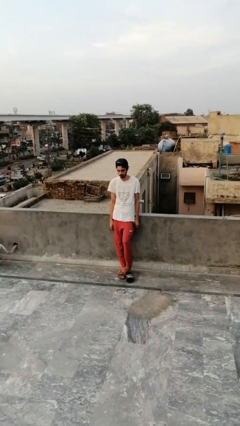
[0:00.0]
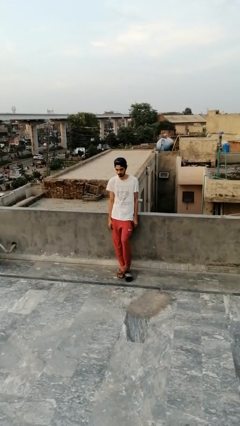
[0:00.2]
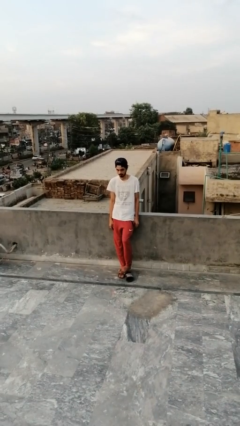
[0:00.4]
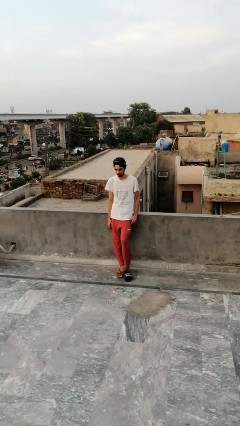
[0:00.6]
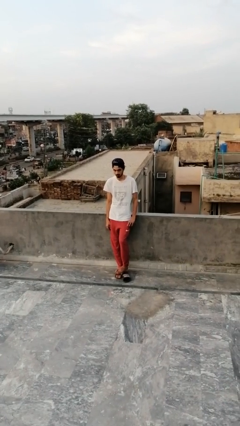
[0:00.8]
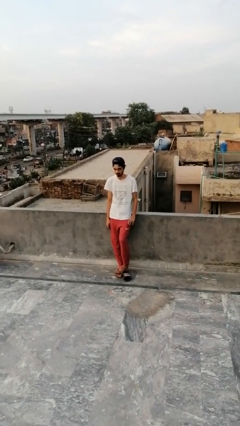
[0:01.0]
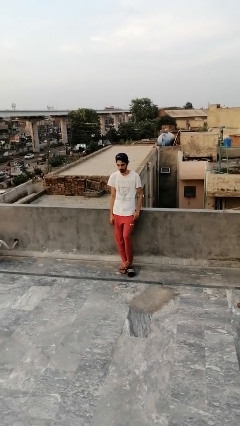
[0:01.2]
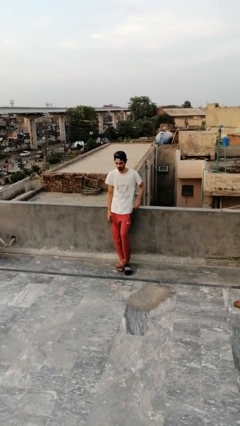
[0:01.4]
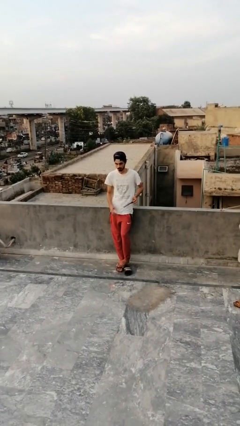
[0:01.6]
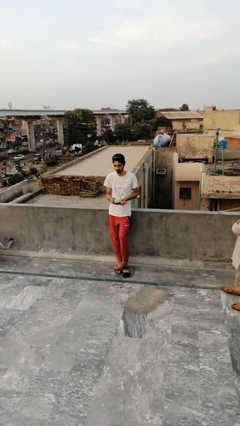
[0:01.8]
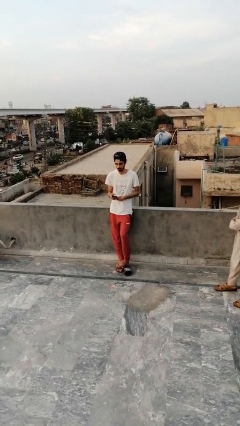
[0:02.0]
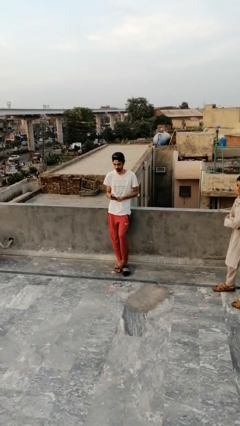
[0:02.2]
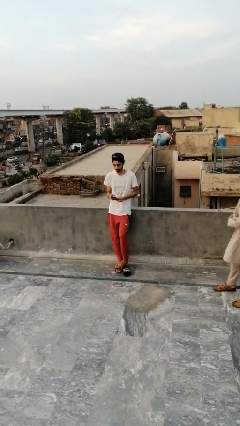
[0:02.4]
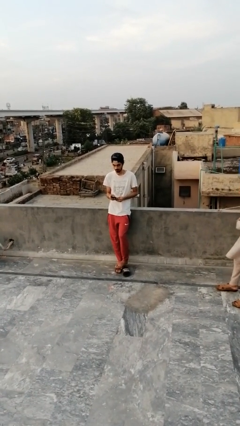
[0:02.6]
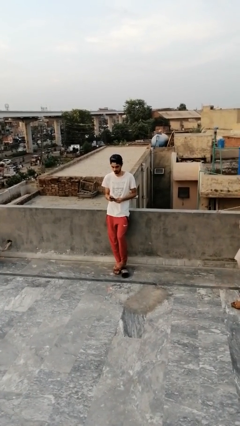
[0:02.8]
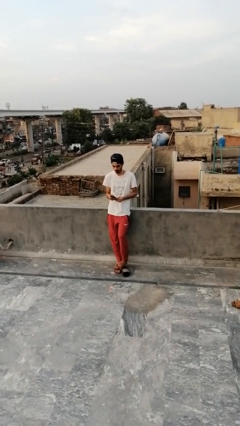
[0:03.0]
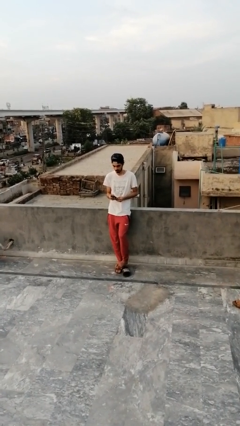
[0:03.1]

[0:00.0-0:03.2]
person takes phone from pocket

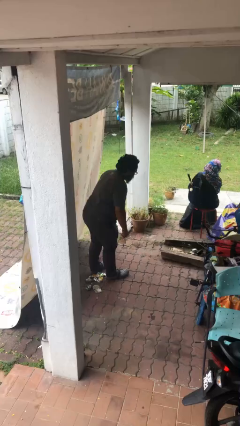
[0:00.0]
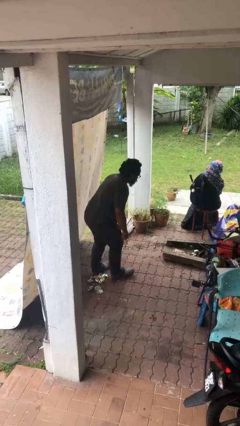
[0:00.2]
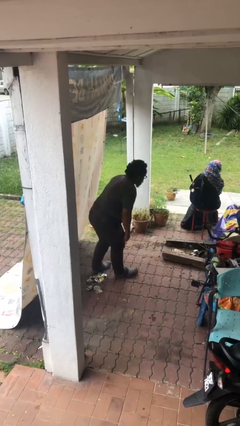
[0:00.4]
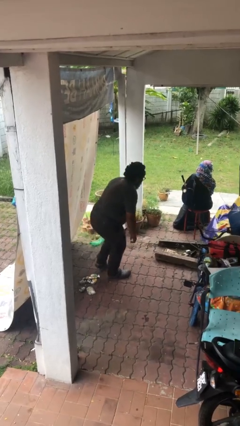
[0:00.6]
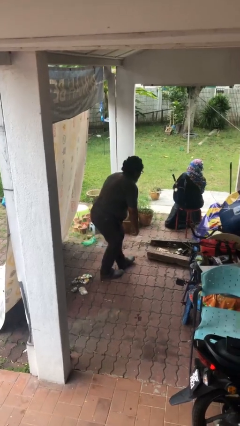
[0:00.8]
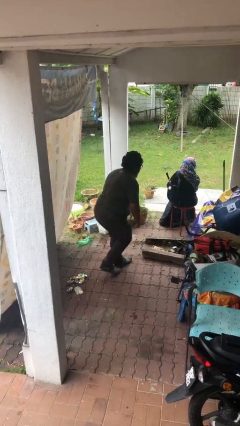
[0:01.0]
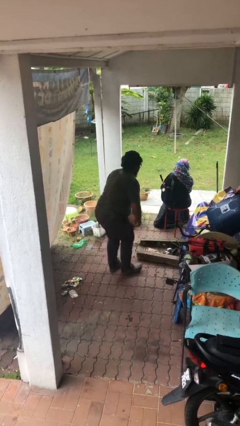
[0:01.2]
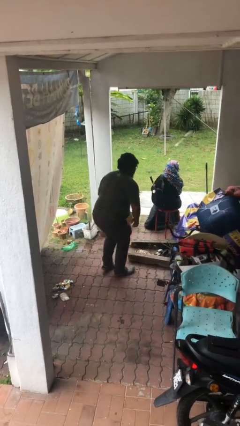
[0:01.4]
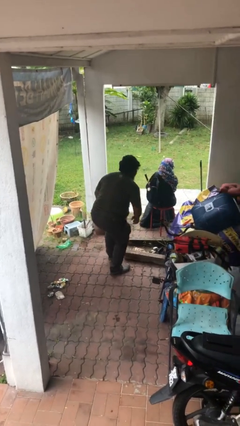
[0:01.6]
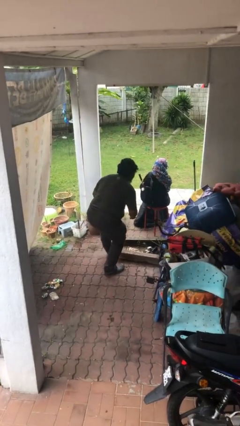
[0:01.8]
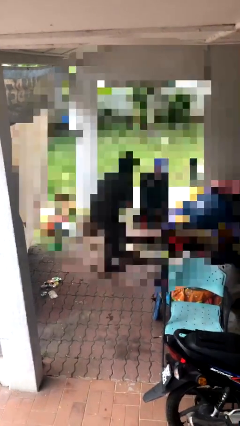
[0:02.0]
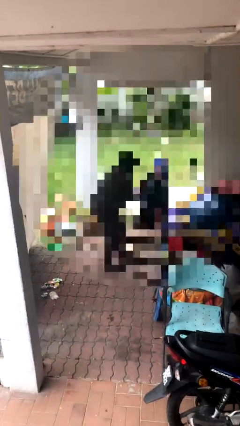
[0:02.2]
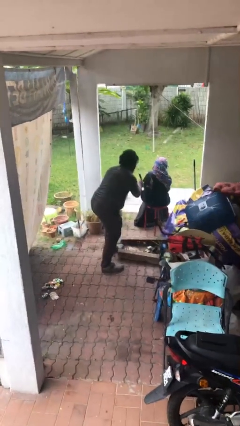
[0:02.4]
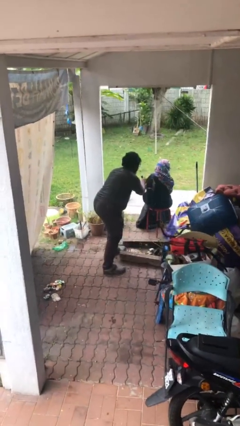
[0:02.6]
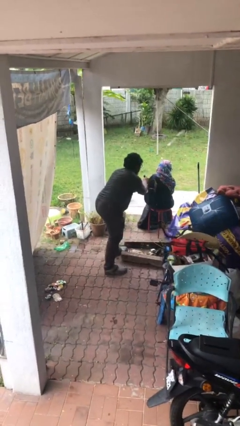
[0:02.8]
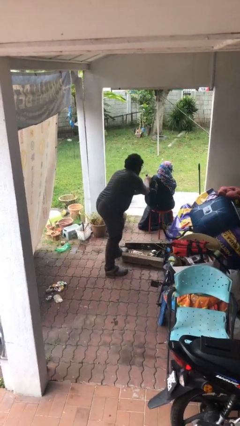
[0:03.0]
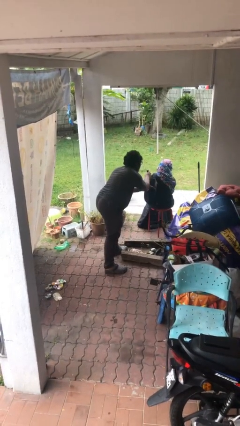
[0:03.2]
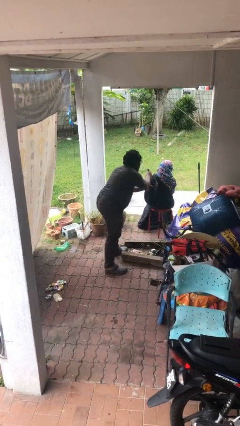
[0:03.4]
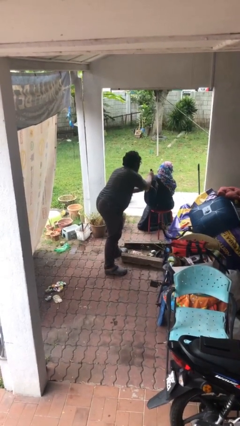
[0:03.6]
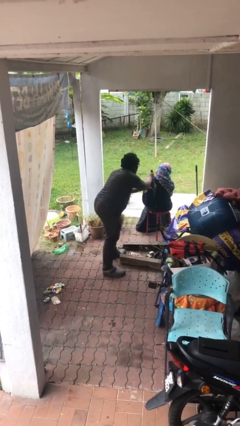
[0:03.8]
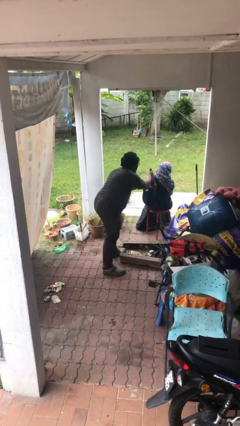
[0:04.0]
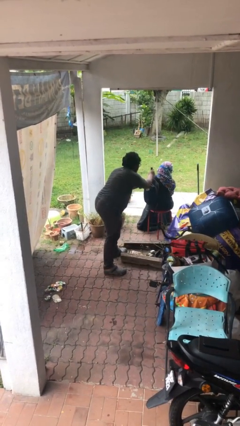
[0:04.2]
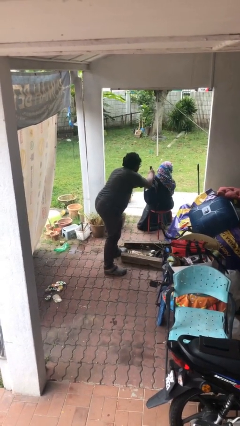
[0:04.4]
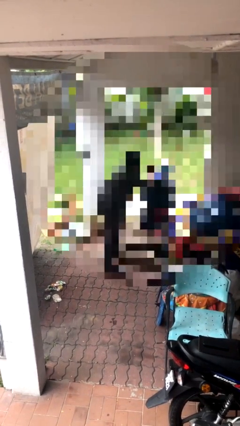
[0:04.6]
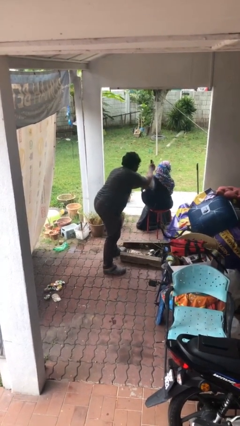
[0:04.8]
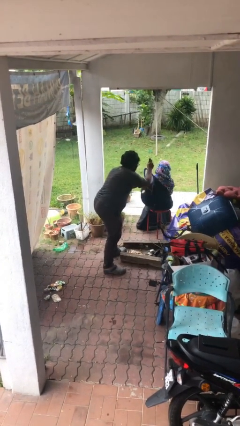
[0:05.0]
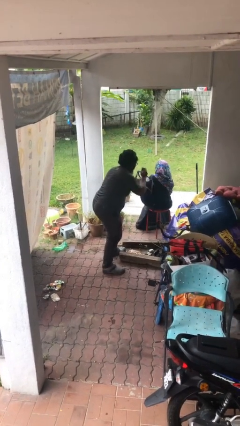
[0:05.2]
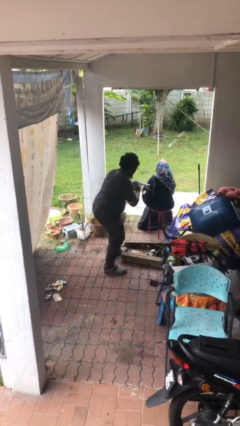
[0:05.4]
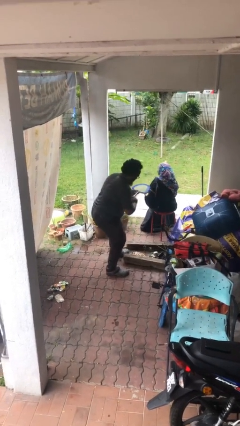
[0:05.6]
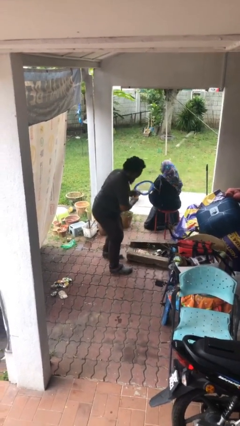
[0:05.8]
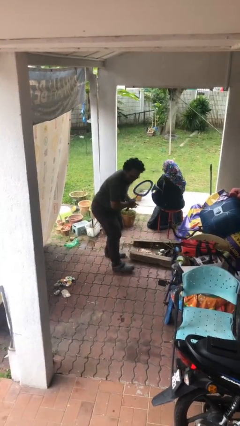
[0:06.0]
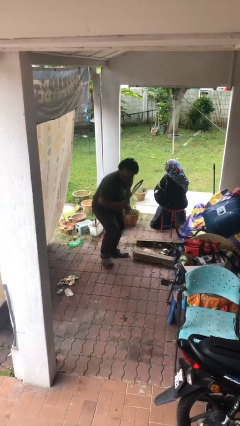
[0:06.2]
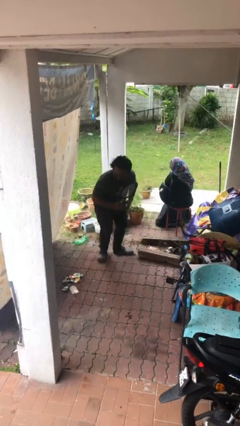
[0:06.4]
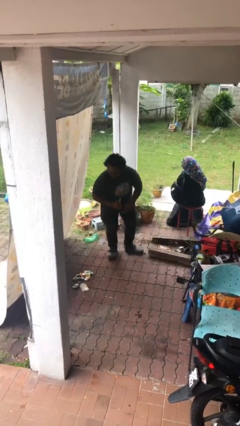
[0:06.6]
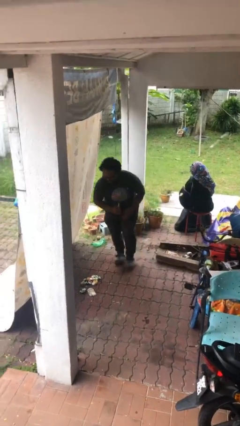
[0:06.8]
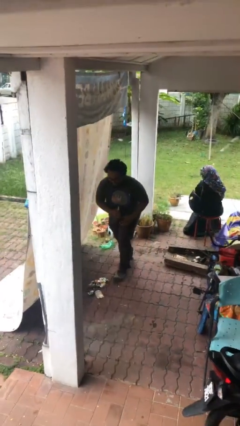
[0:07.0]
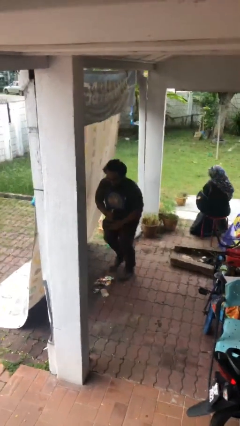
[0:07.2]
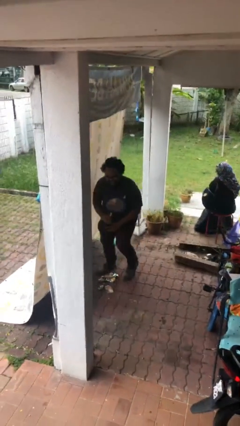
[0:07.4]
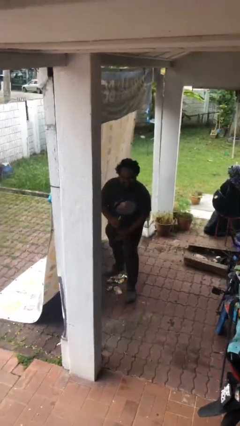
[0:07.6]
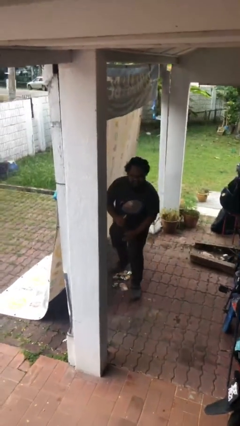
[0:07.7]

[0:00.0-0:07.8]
person steals object from person

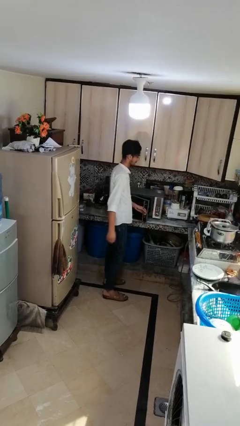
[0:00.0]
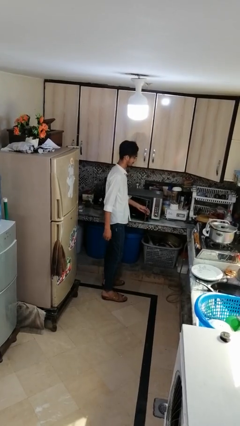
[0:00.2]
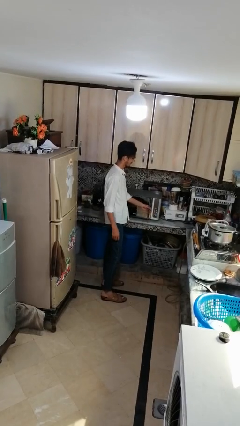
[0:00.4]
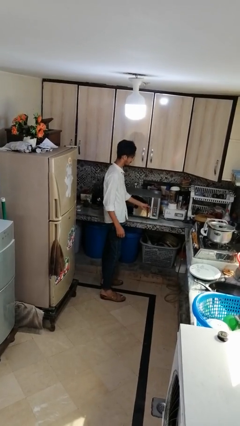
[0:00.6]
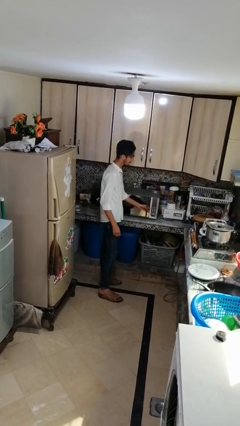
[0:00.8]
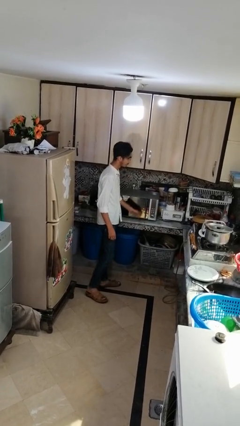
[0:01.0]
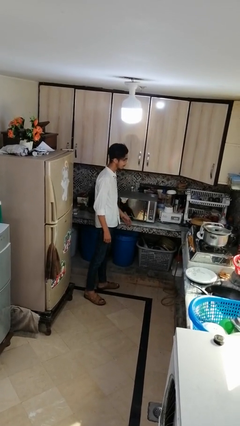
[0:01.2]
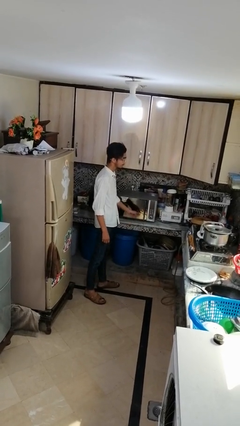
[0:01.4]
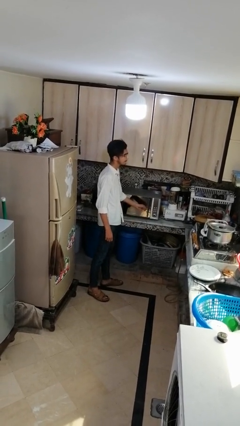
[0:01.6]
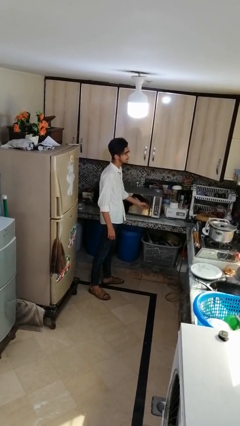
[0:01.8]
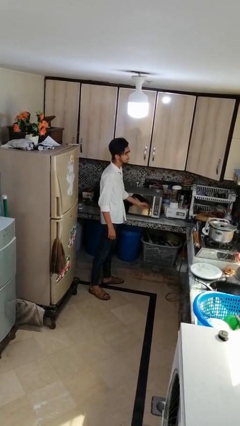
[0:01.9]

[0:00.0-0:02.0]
person closes microwave

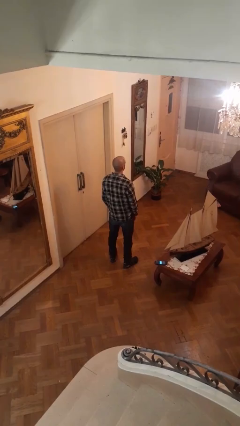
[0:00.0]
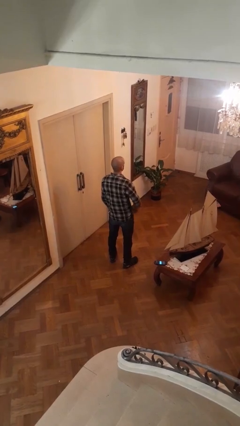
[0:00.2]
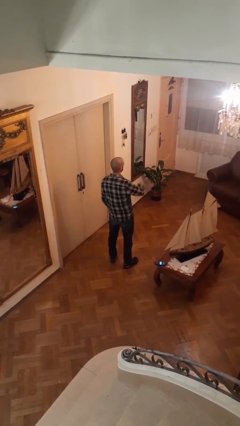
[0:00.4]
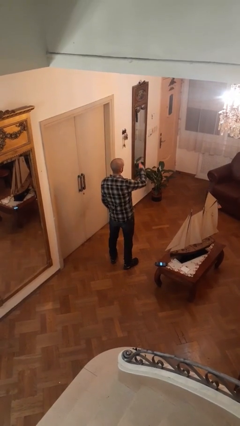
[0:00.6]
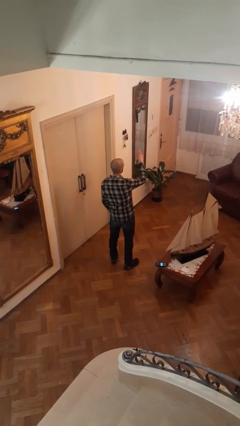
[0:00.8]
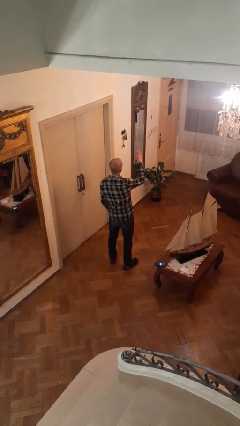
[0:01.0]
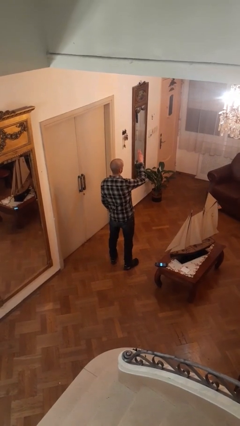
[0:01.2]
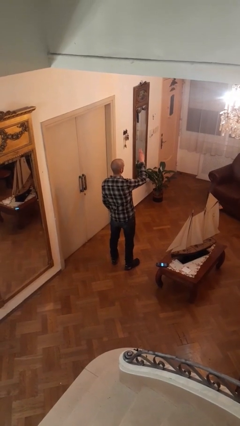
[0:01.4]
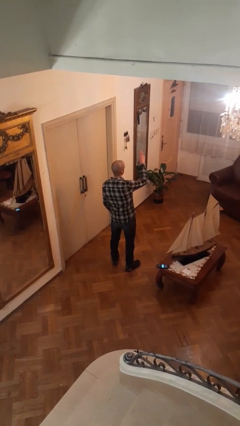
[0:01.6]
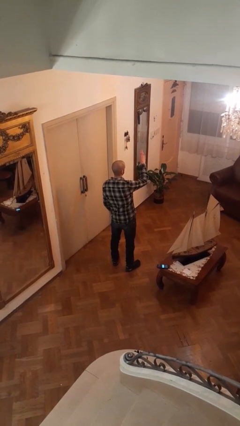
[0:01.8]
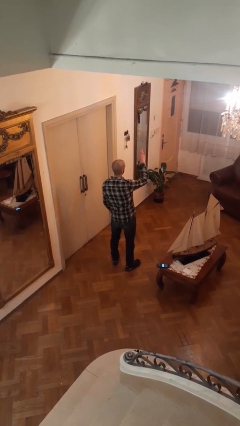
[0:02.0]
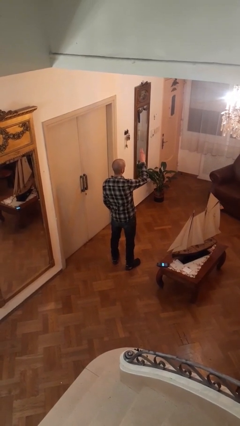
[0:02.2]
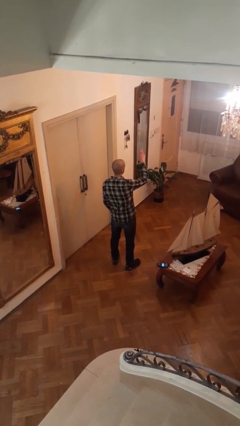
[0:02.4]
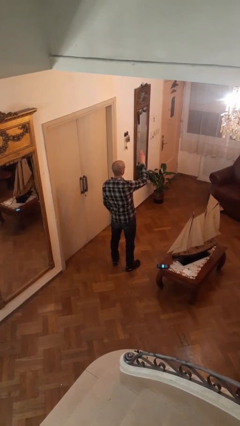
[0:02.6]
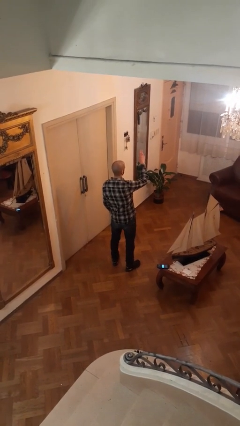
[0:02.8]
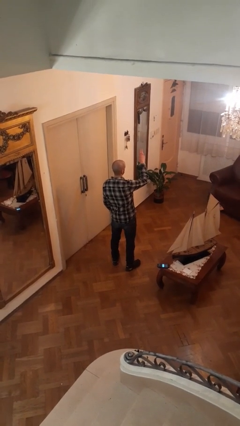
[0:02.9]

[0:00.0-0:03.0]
person gestures swipe up

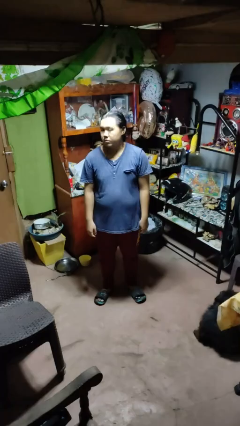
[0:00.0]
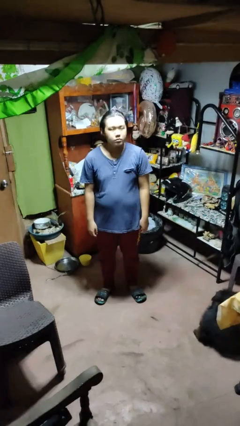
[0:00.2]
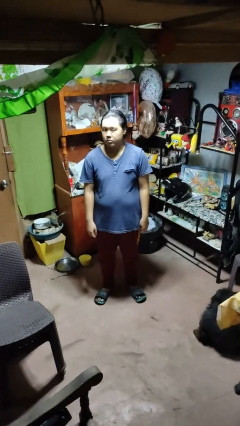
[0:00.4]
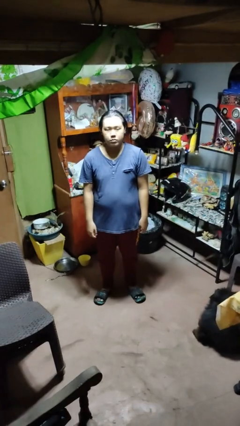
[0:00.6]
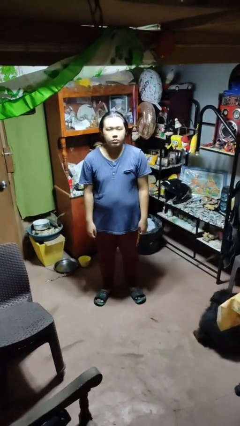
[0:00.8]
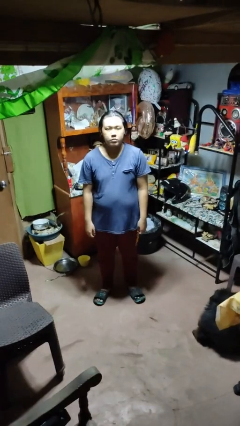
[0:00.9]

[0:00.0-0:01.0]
person shakes head

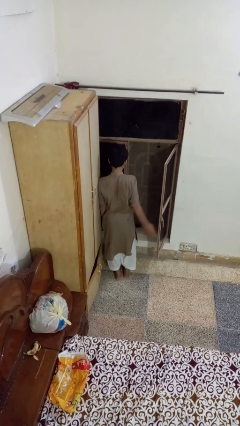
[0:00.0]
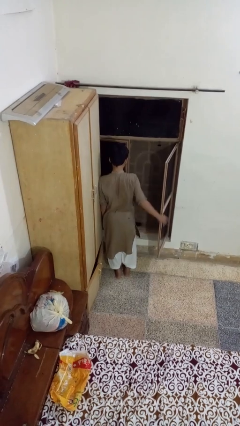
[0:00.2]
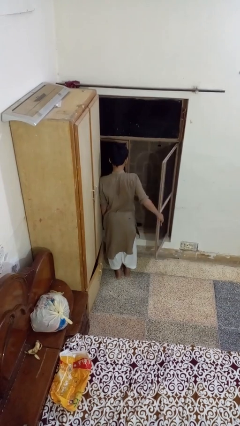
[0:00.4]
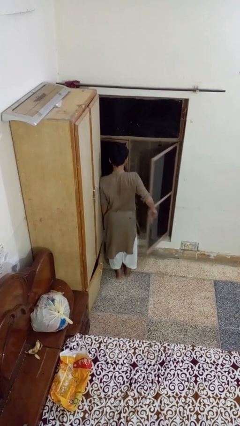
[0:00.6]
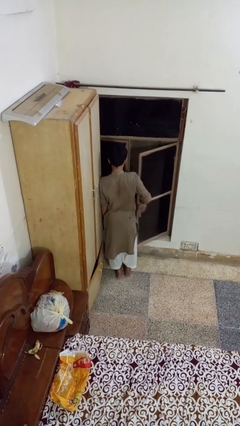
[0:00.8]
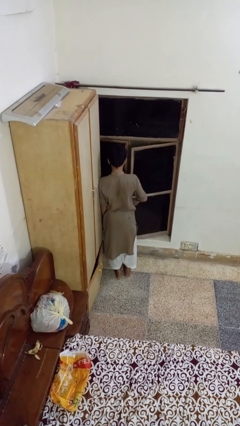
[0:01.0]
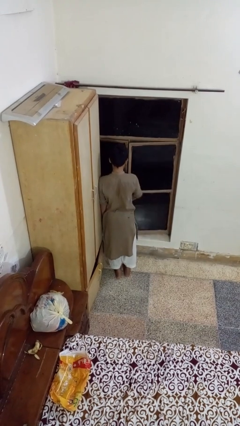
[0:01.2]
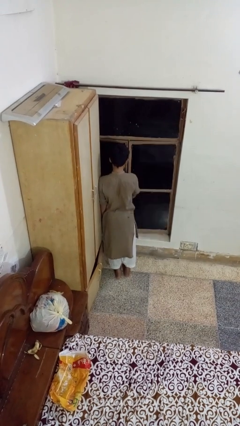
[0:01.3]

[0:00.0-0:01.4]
person closes home window
